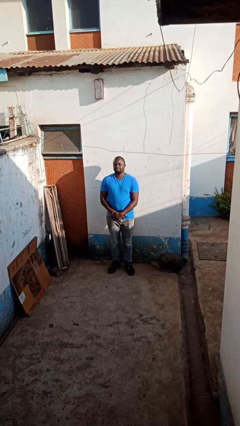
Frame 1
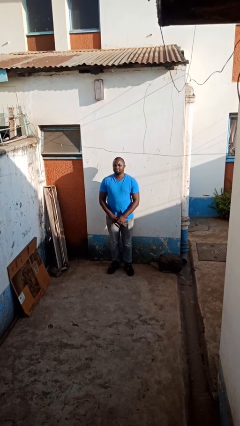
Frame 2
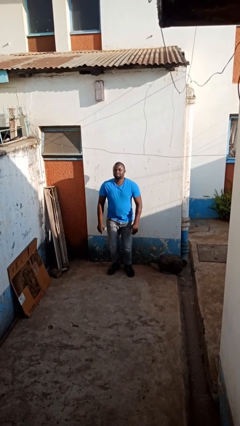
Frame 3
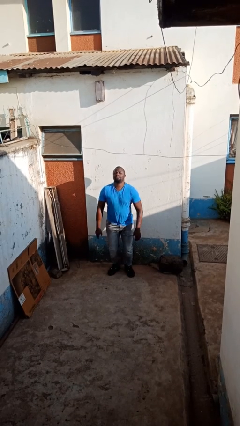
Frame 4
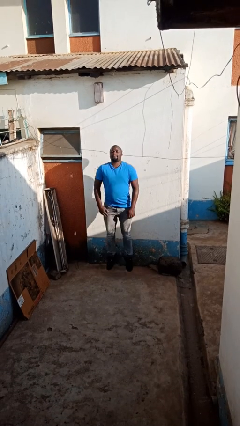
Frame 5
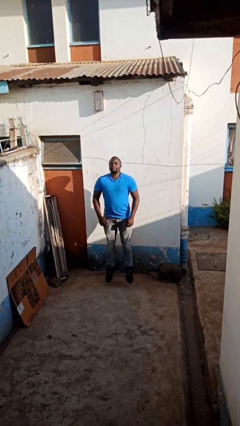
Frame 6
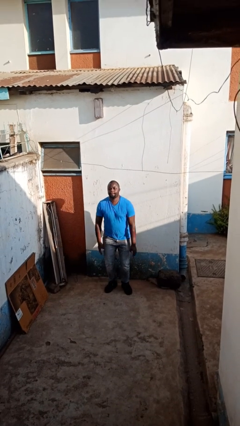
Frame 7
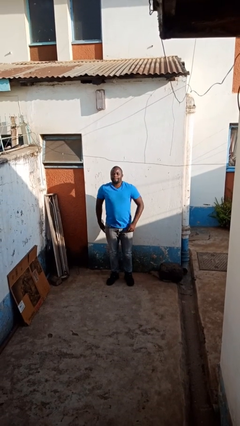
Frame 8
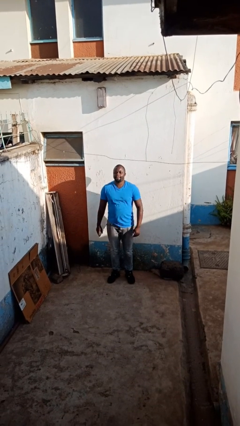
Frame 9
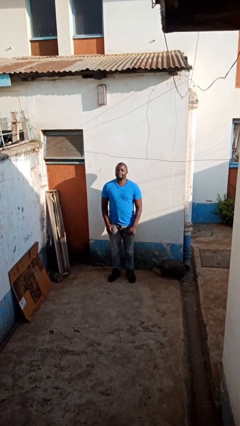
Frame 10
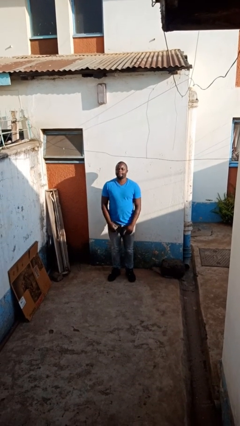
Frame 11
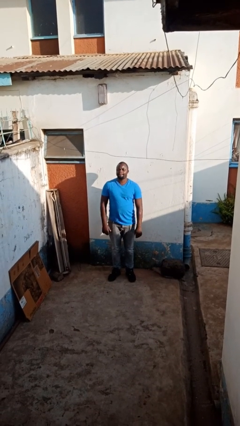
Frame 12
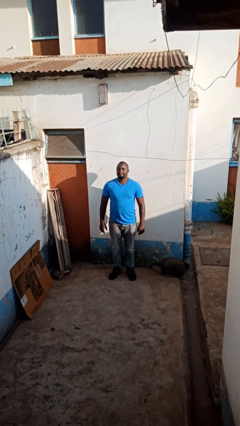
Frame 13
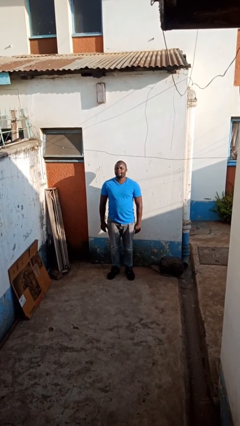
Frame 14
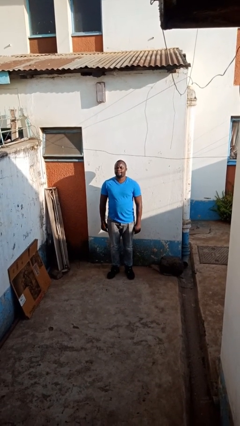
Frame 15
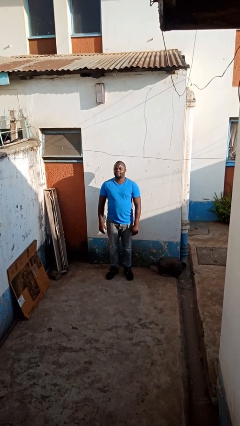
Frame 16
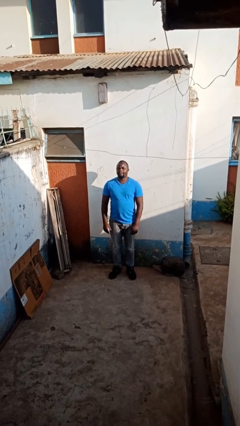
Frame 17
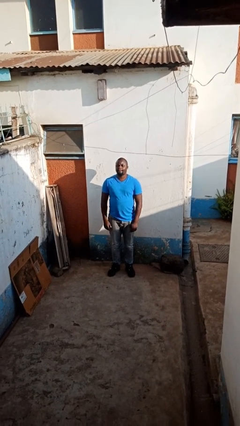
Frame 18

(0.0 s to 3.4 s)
person jumps

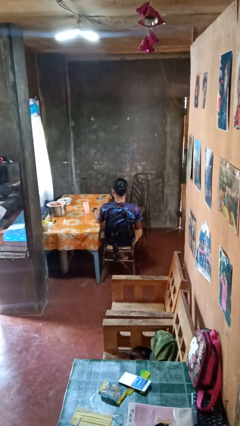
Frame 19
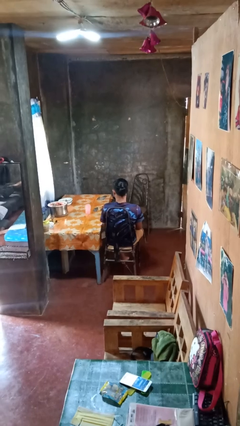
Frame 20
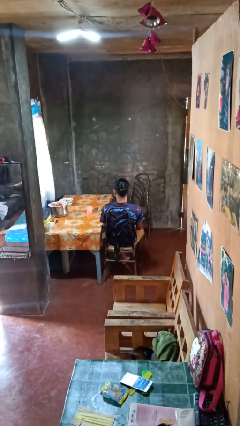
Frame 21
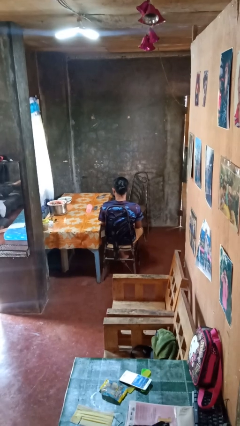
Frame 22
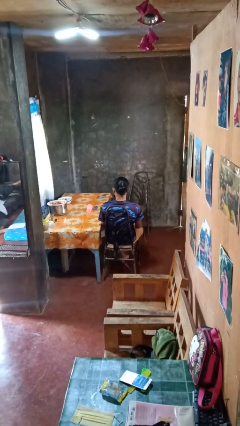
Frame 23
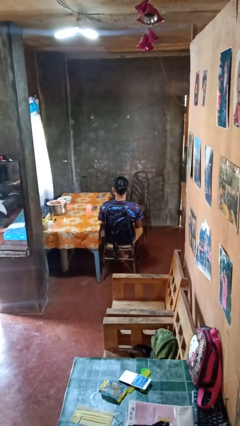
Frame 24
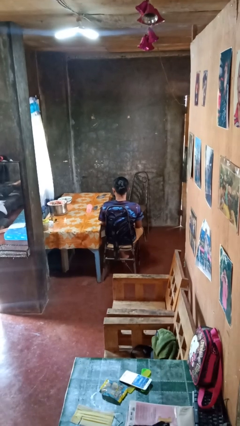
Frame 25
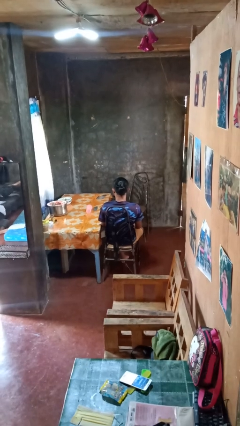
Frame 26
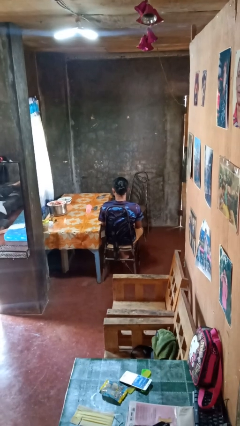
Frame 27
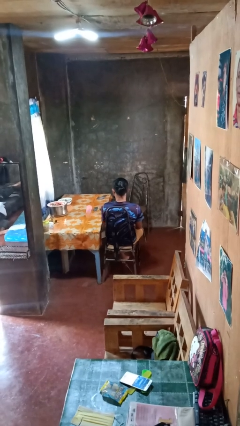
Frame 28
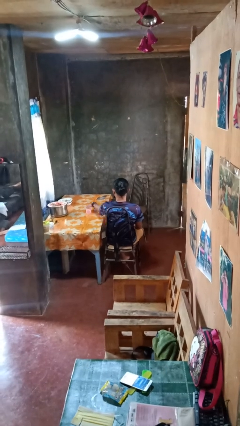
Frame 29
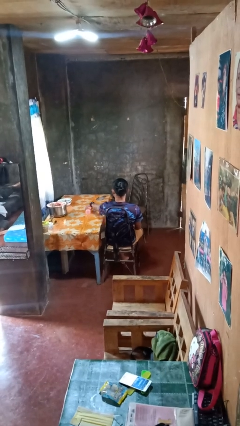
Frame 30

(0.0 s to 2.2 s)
person knocks over glass

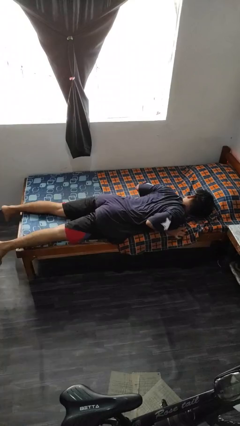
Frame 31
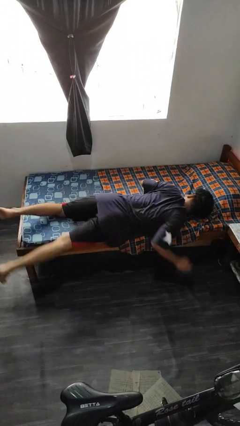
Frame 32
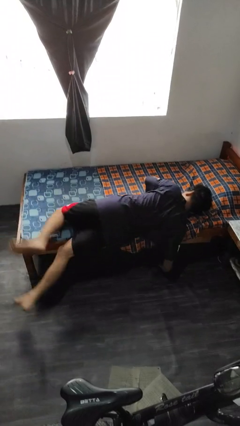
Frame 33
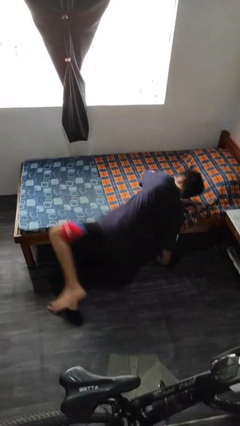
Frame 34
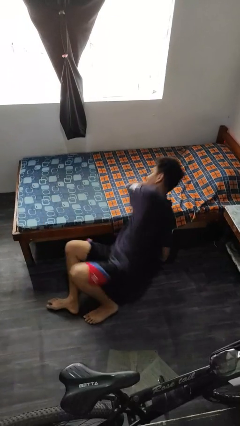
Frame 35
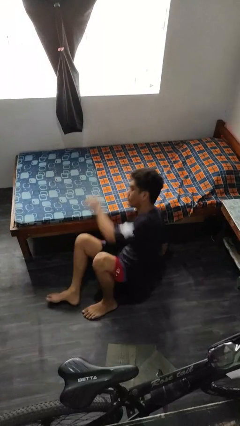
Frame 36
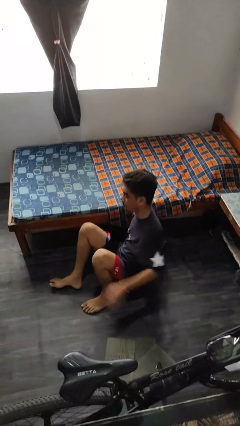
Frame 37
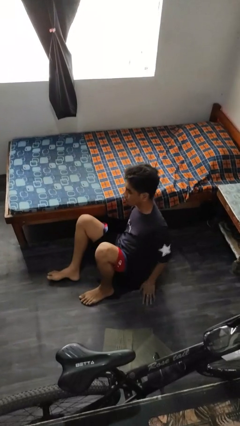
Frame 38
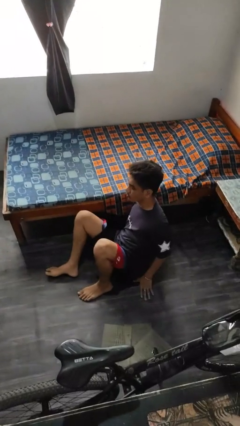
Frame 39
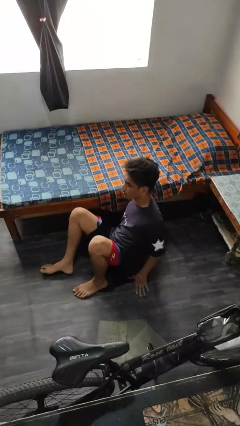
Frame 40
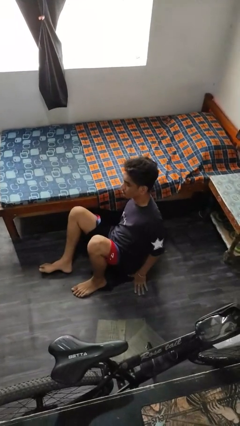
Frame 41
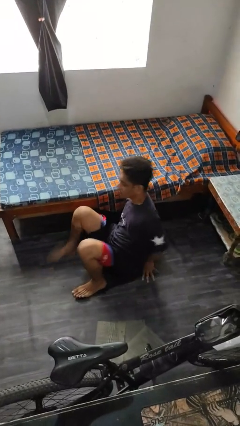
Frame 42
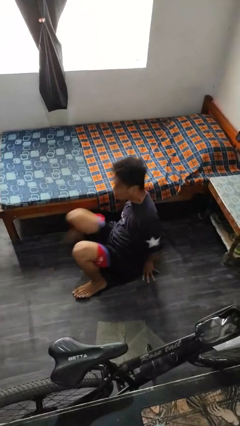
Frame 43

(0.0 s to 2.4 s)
person falls from bed

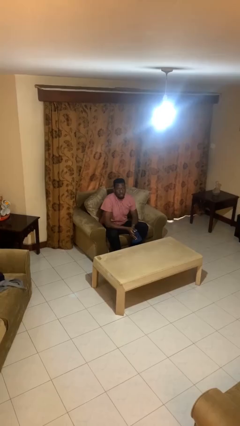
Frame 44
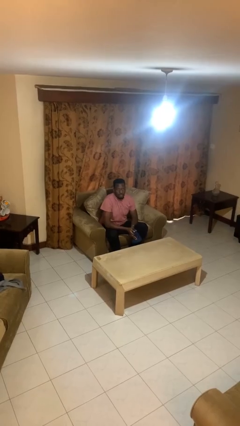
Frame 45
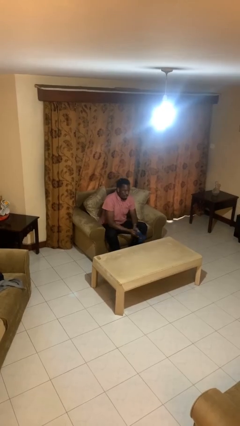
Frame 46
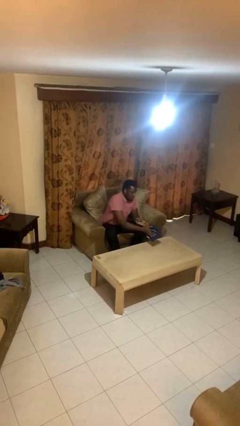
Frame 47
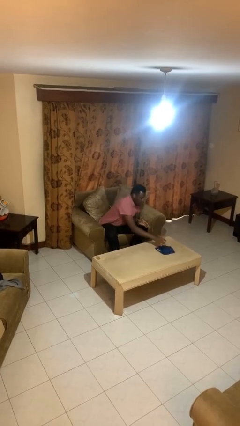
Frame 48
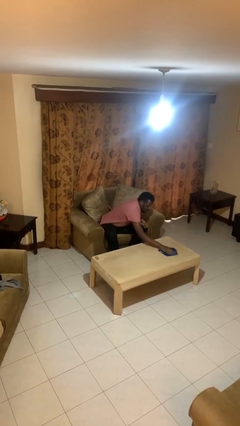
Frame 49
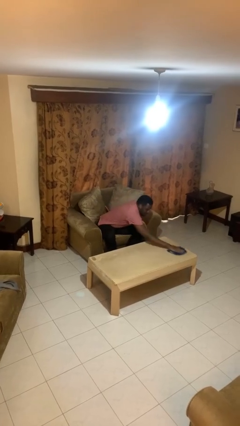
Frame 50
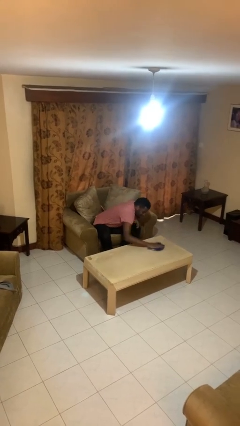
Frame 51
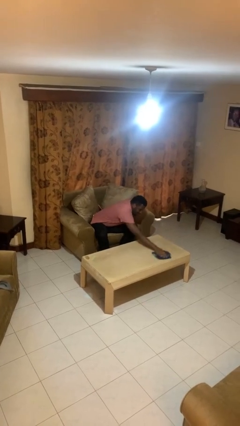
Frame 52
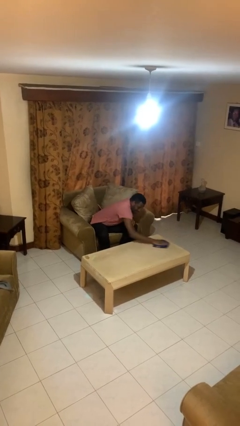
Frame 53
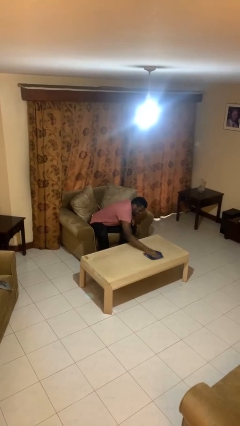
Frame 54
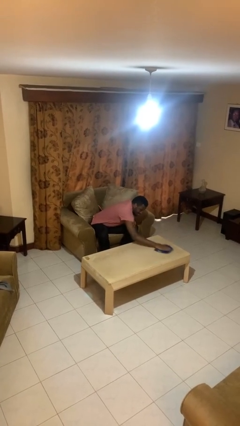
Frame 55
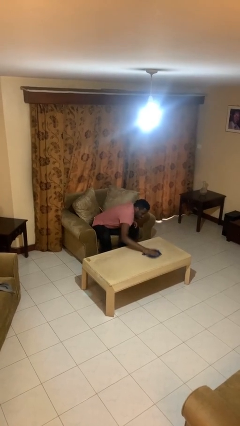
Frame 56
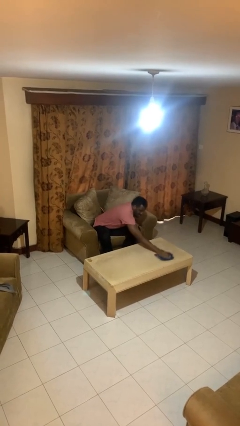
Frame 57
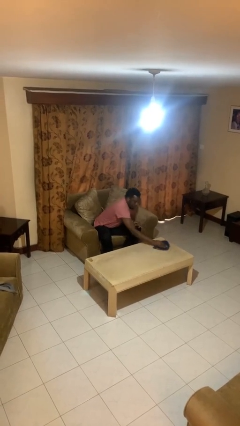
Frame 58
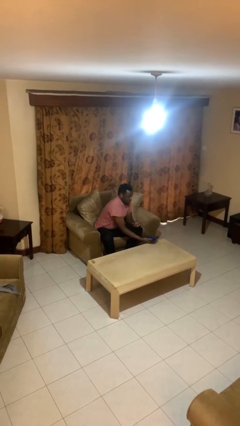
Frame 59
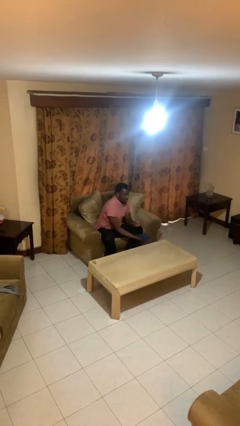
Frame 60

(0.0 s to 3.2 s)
person cleans table with rag

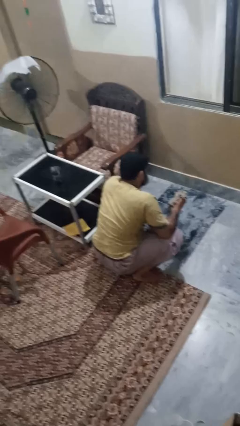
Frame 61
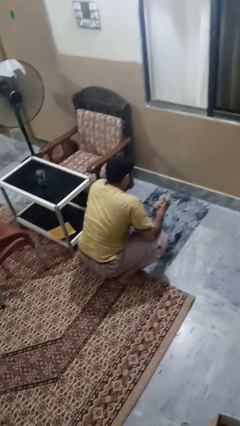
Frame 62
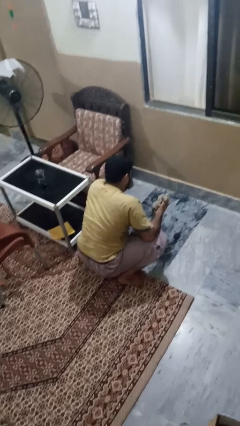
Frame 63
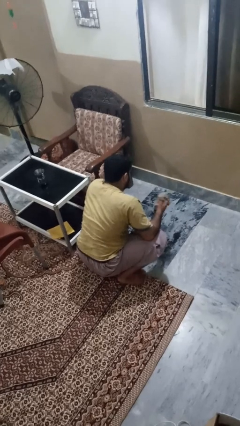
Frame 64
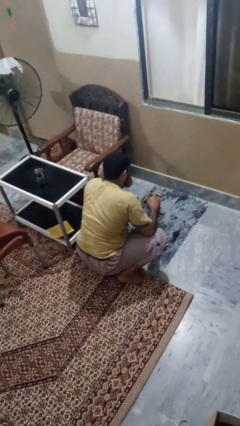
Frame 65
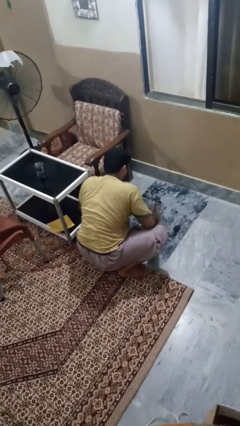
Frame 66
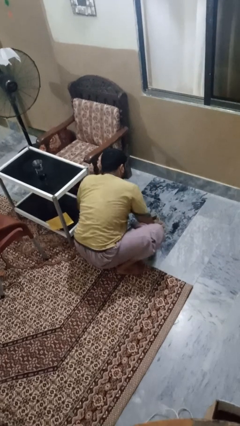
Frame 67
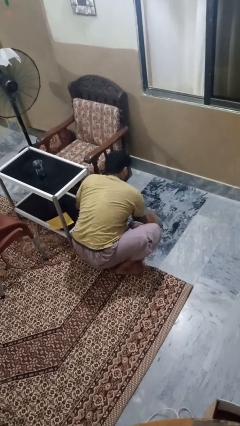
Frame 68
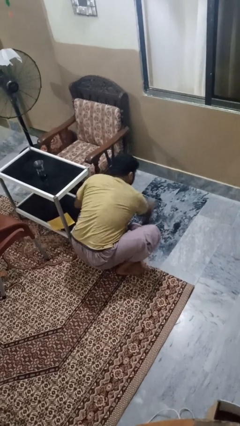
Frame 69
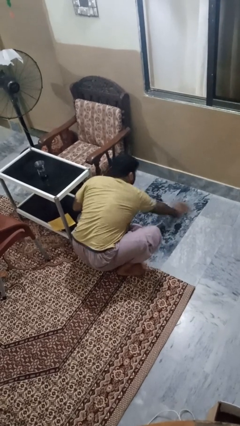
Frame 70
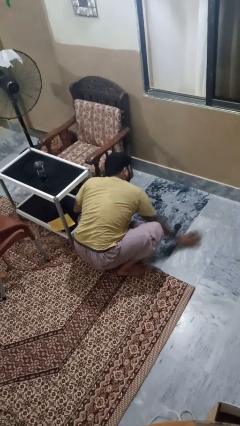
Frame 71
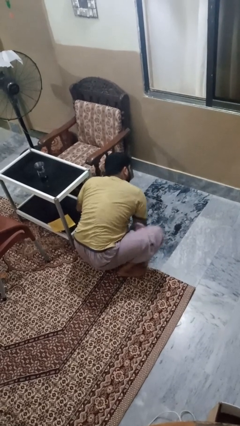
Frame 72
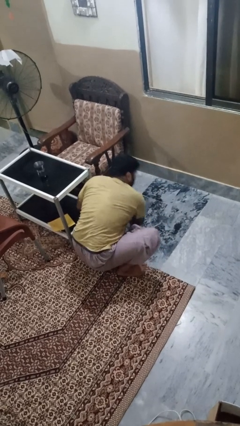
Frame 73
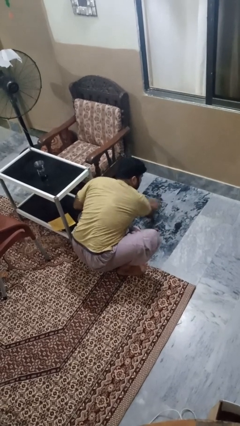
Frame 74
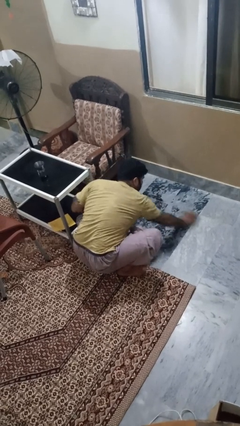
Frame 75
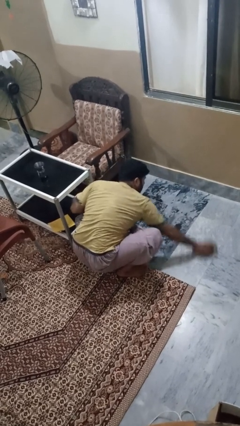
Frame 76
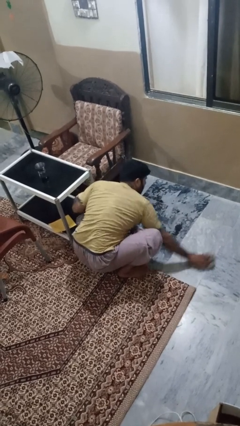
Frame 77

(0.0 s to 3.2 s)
person mops

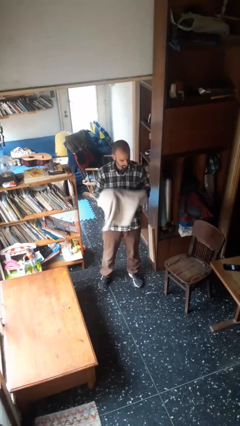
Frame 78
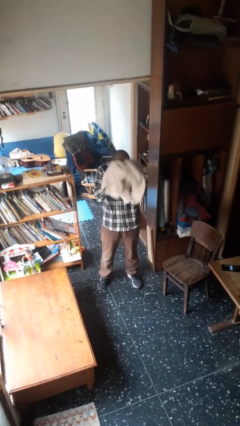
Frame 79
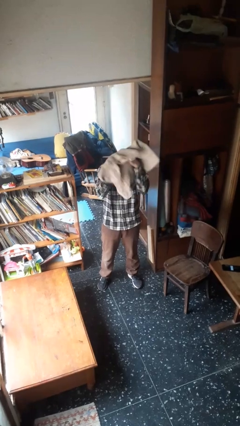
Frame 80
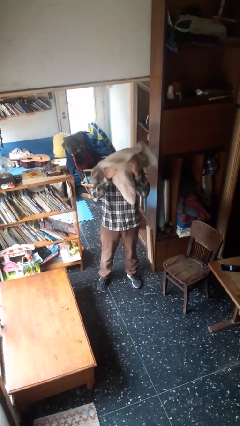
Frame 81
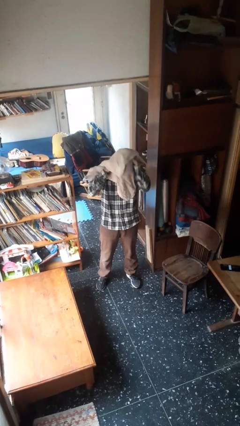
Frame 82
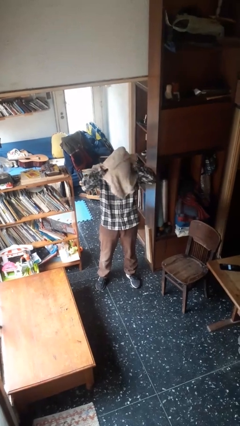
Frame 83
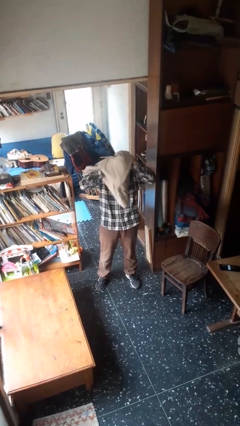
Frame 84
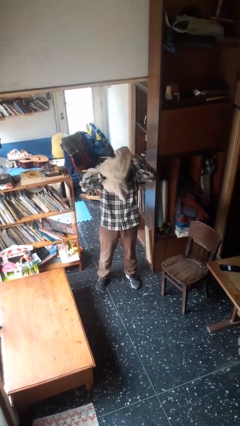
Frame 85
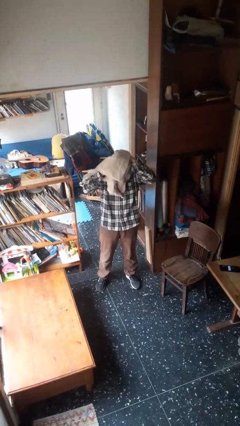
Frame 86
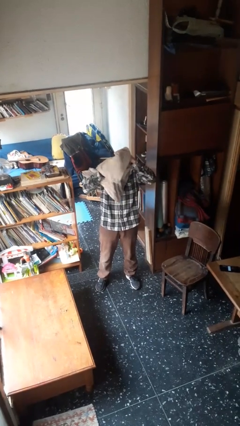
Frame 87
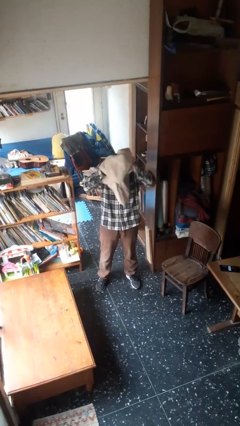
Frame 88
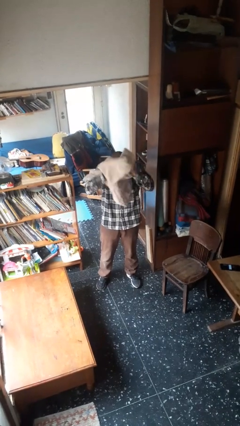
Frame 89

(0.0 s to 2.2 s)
person dries hair with towel

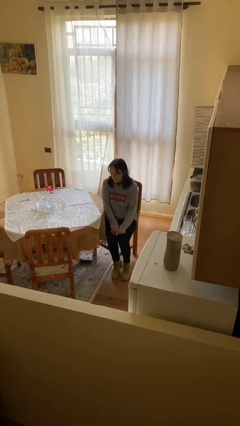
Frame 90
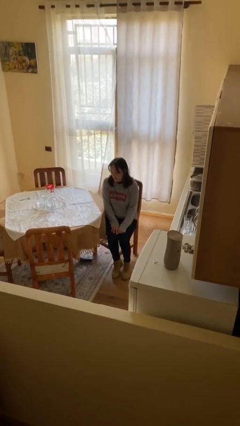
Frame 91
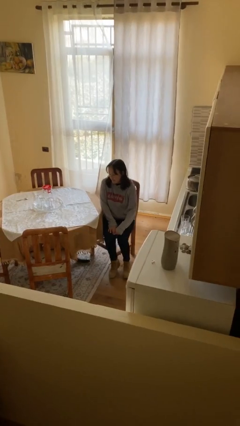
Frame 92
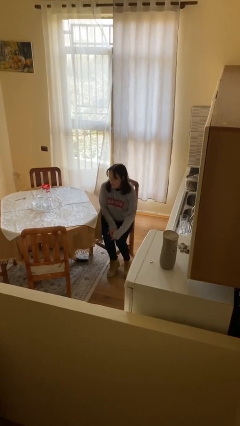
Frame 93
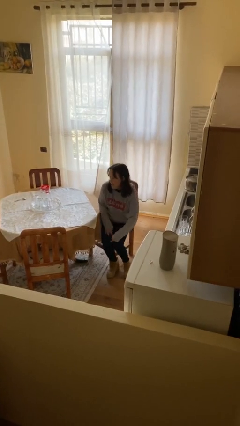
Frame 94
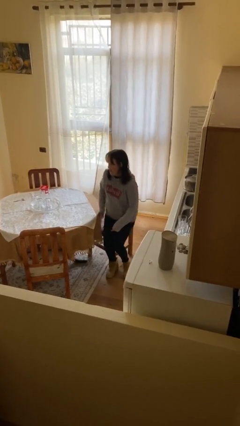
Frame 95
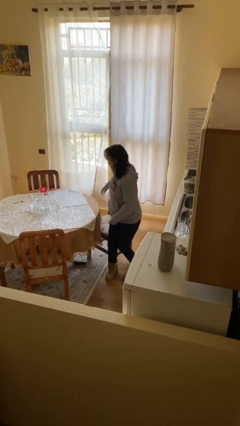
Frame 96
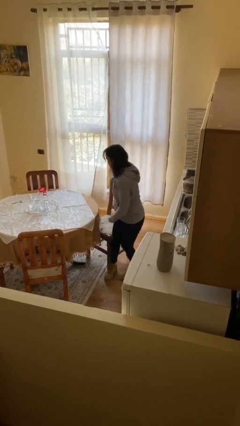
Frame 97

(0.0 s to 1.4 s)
person stands up
